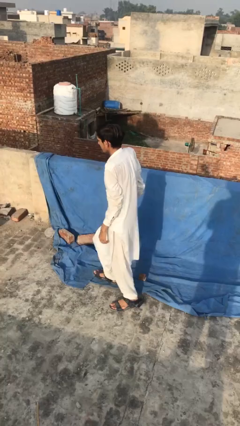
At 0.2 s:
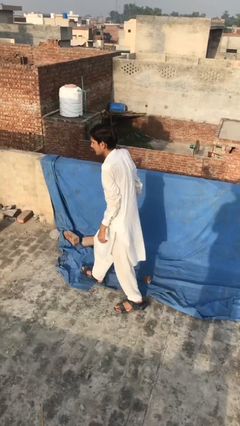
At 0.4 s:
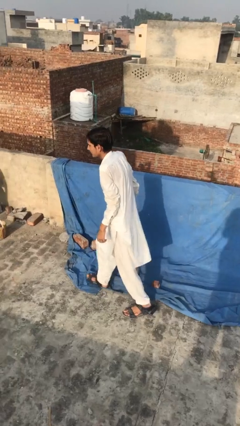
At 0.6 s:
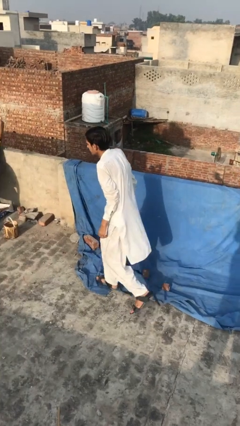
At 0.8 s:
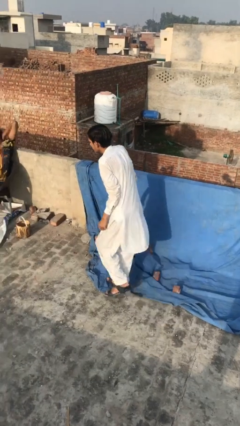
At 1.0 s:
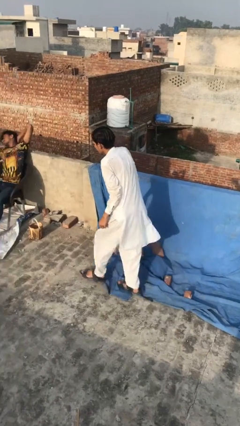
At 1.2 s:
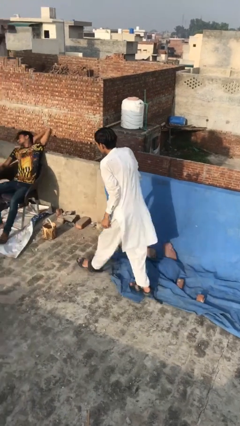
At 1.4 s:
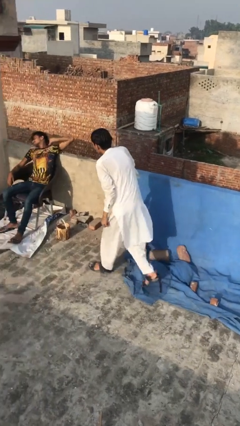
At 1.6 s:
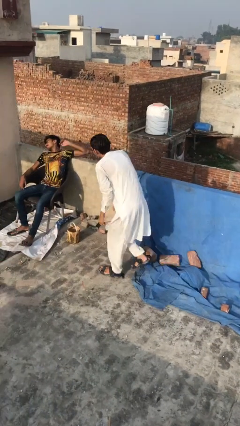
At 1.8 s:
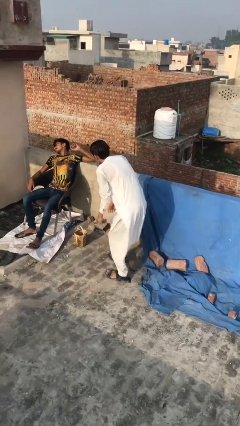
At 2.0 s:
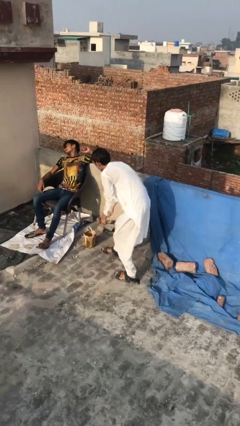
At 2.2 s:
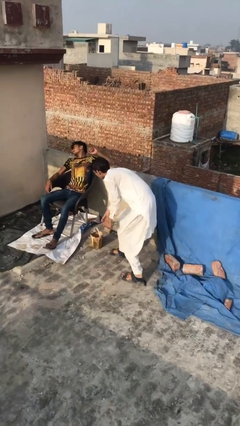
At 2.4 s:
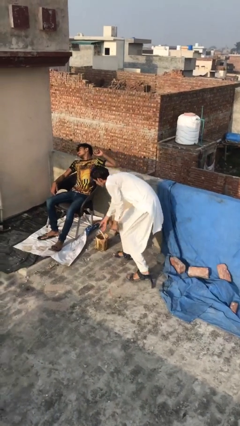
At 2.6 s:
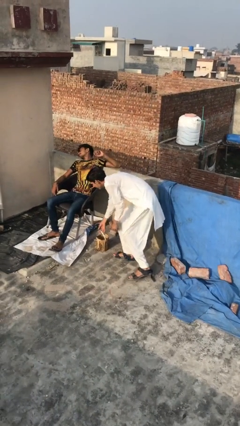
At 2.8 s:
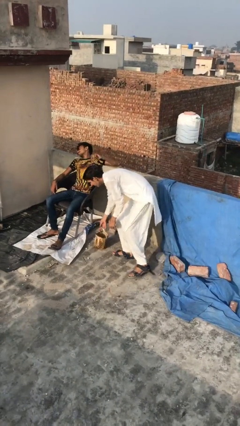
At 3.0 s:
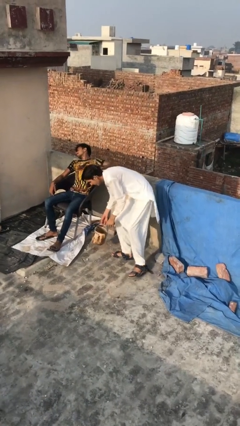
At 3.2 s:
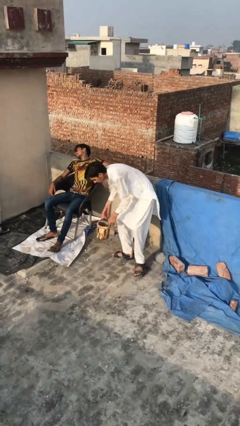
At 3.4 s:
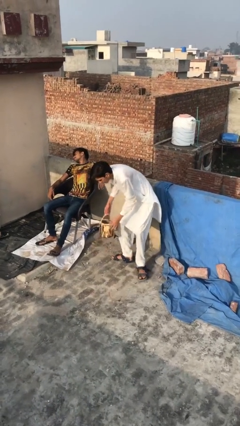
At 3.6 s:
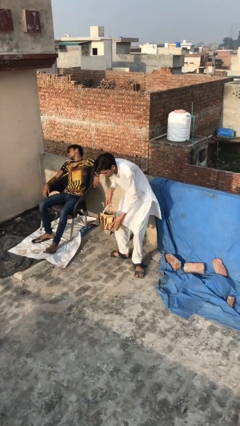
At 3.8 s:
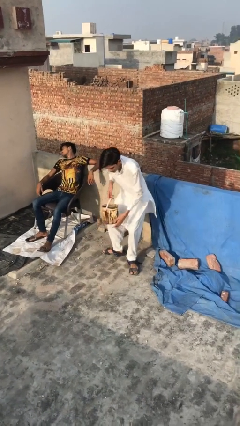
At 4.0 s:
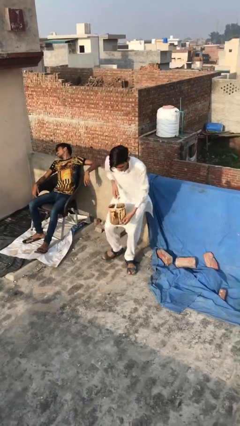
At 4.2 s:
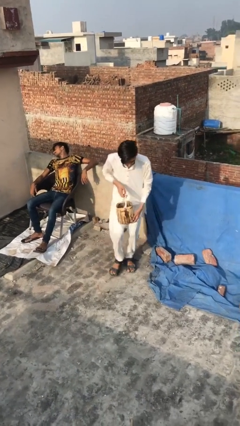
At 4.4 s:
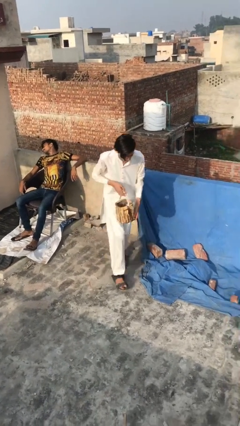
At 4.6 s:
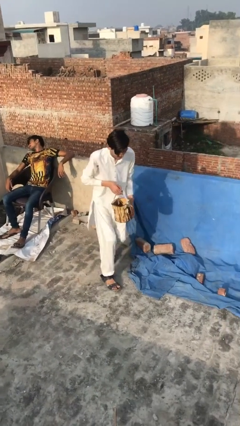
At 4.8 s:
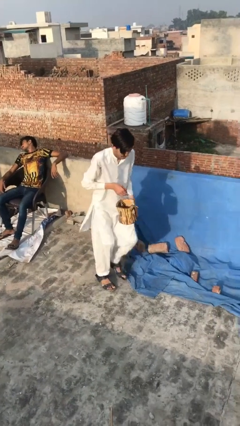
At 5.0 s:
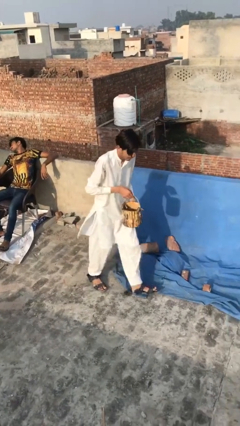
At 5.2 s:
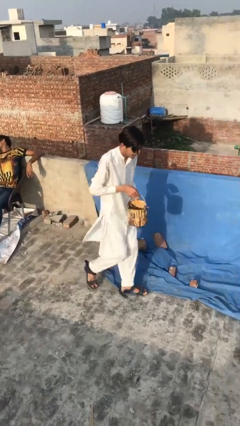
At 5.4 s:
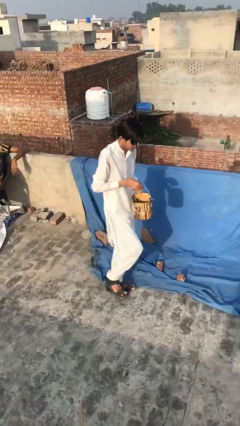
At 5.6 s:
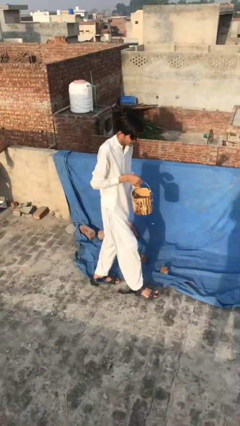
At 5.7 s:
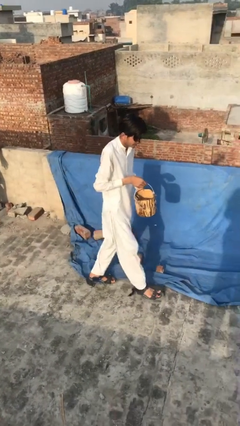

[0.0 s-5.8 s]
person steals object from person

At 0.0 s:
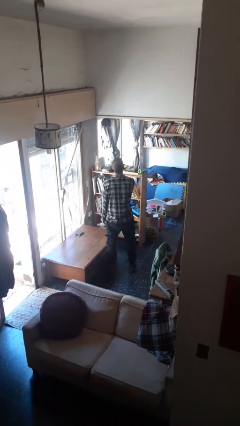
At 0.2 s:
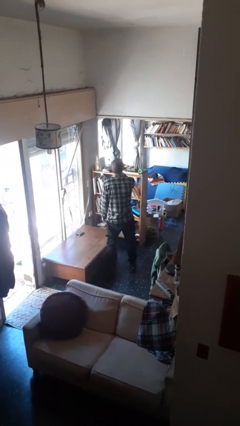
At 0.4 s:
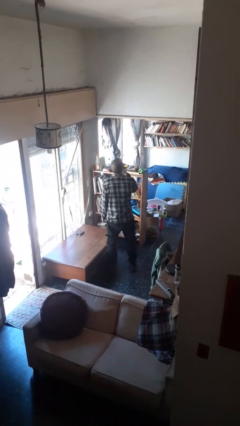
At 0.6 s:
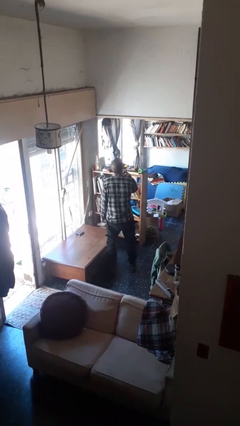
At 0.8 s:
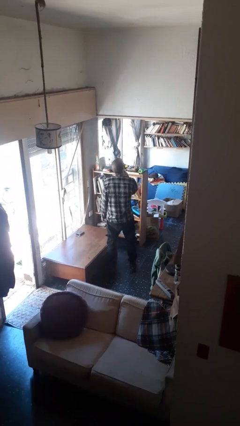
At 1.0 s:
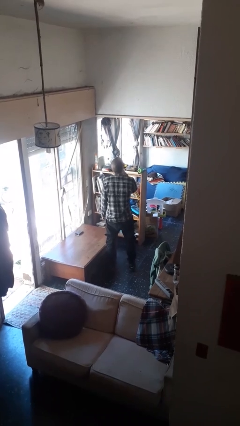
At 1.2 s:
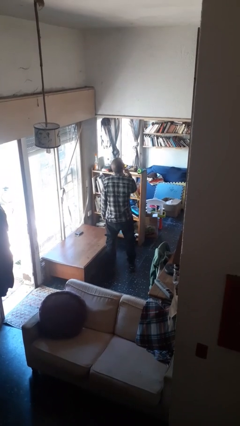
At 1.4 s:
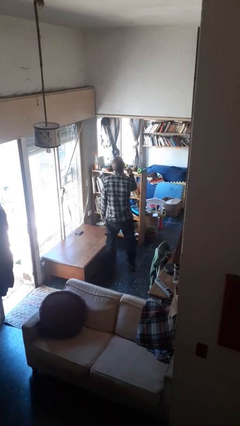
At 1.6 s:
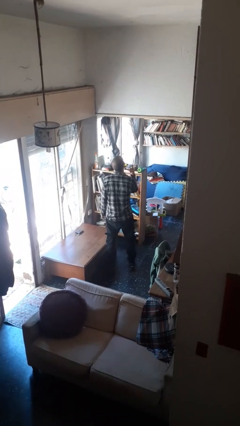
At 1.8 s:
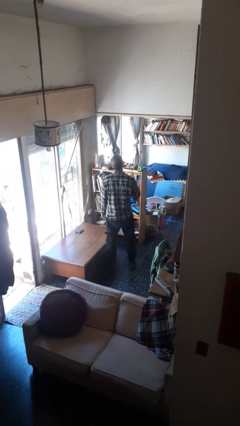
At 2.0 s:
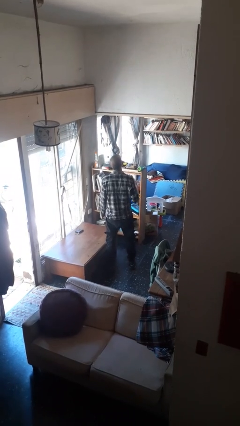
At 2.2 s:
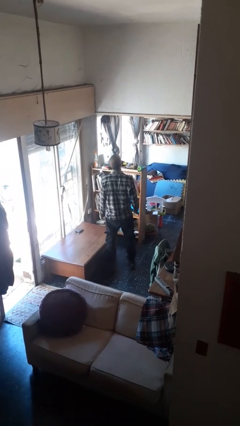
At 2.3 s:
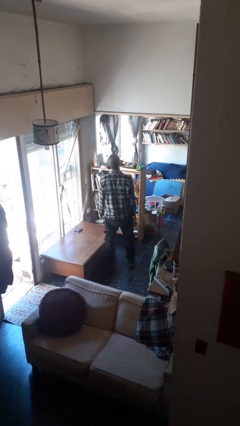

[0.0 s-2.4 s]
person gestures cut

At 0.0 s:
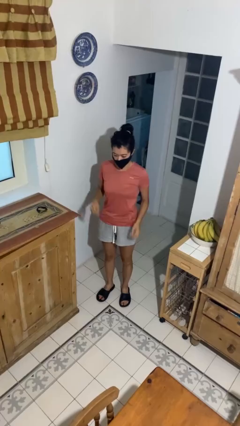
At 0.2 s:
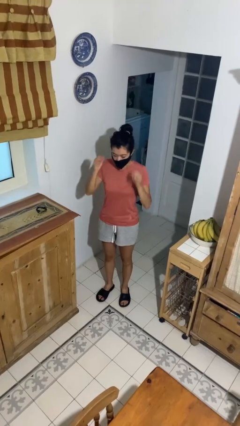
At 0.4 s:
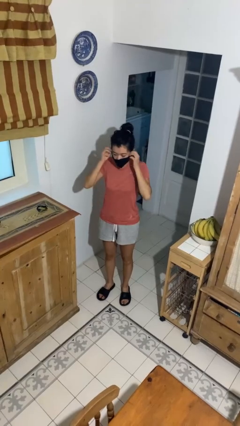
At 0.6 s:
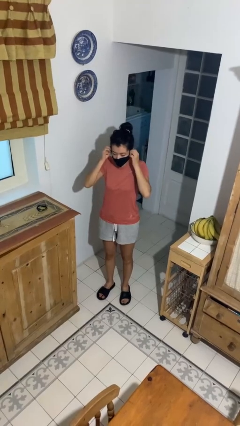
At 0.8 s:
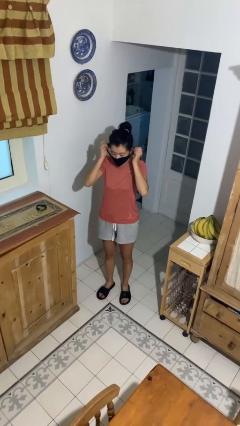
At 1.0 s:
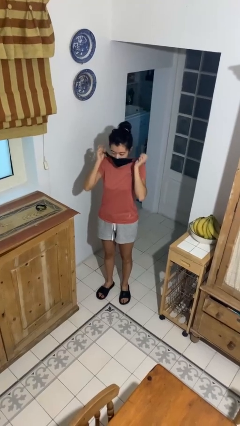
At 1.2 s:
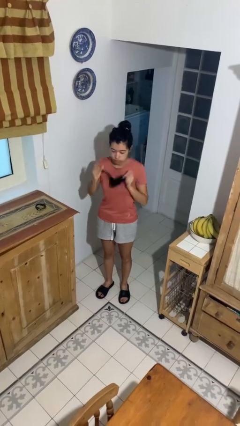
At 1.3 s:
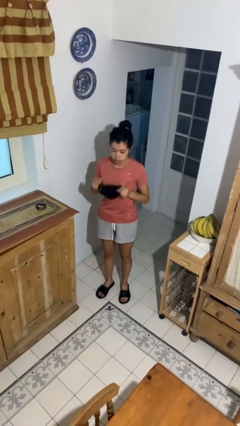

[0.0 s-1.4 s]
person takes off facemask

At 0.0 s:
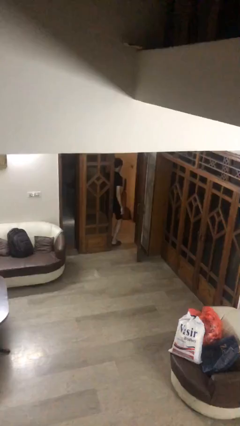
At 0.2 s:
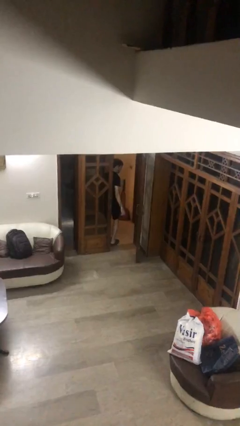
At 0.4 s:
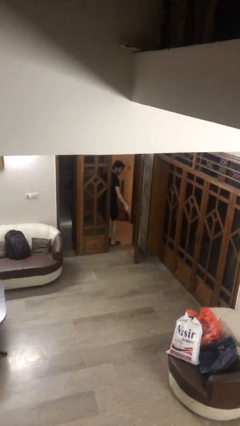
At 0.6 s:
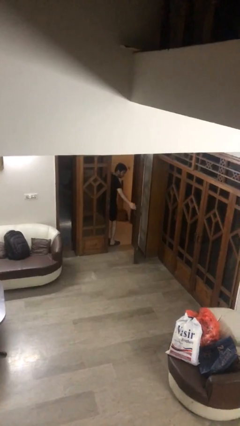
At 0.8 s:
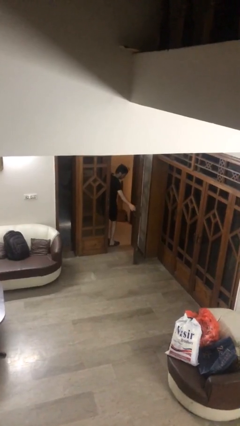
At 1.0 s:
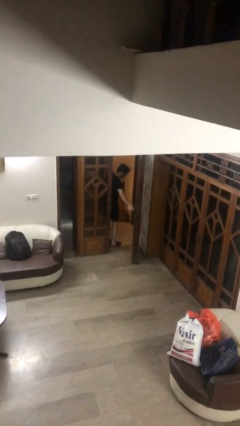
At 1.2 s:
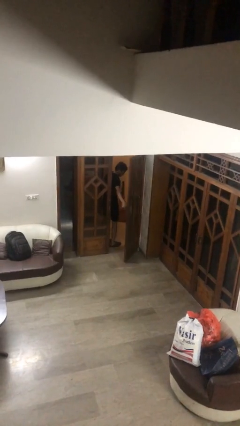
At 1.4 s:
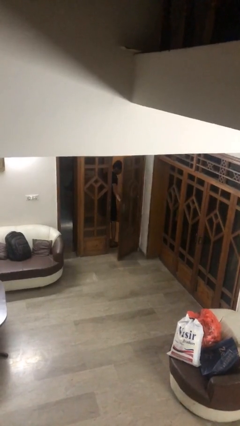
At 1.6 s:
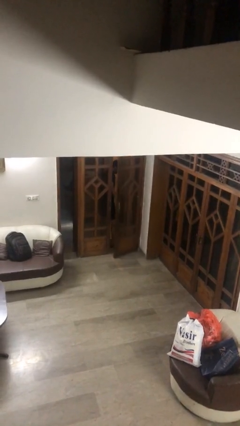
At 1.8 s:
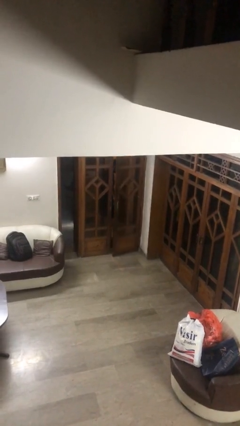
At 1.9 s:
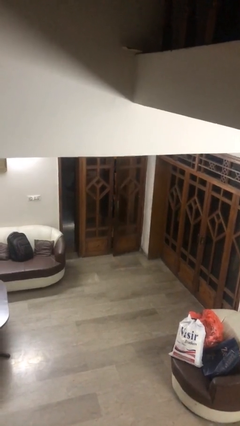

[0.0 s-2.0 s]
person closes facility door

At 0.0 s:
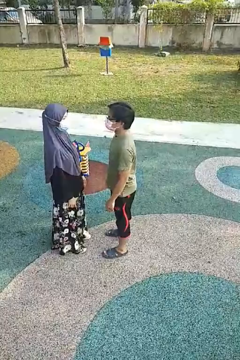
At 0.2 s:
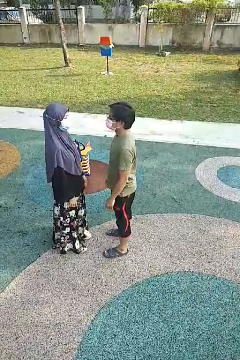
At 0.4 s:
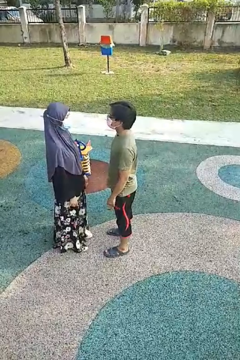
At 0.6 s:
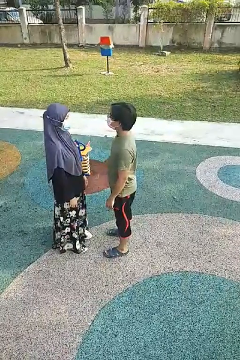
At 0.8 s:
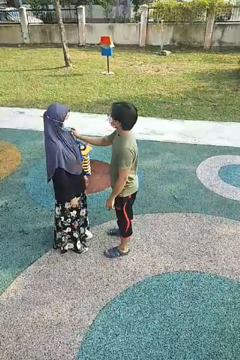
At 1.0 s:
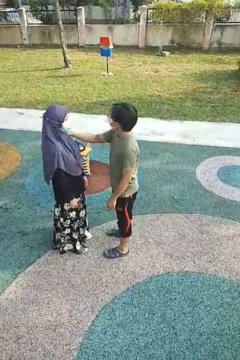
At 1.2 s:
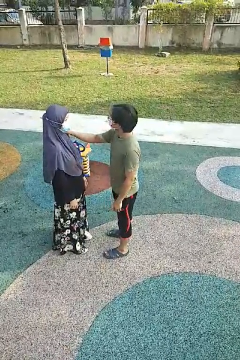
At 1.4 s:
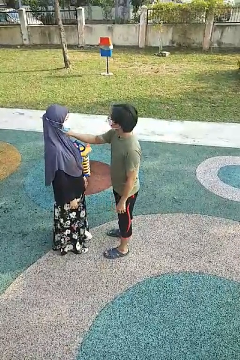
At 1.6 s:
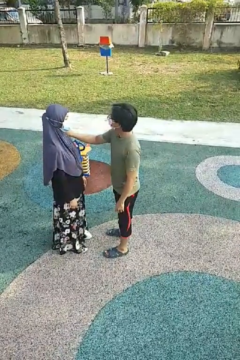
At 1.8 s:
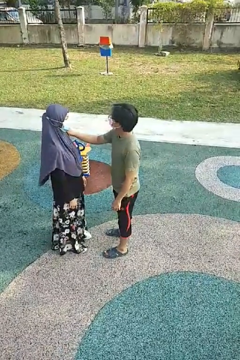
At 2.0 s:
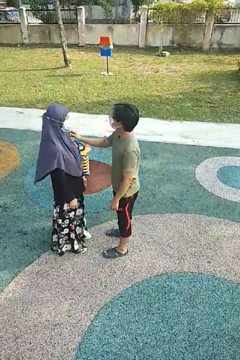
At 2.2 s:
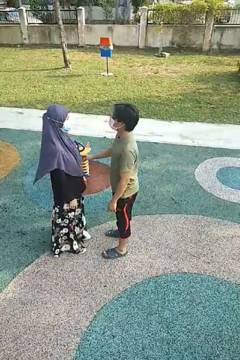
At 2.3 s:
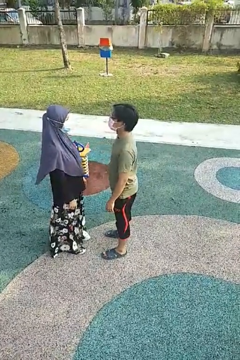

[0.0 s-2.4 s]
person pounds shoulders of person

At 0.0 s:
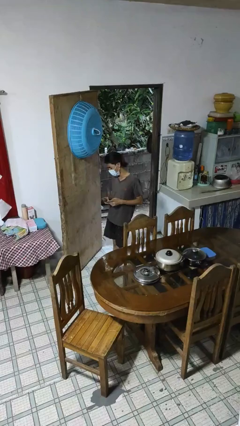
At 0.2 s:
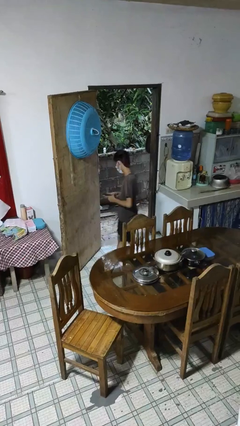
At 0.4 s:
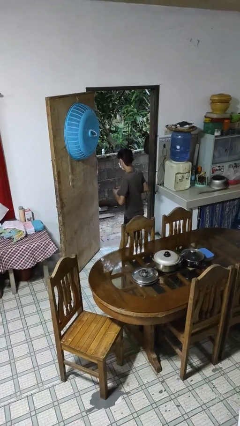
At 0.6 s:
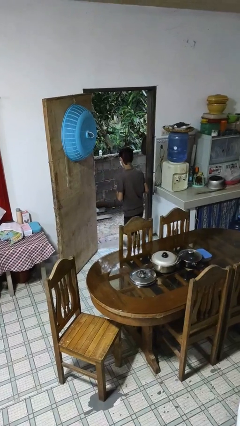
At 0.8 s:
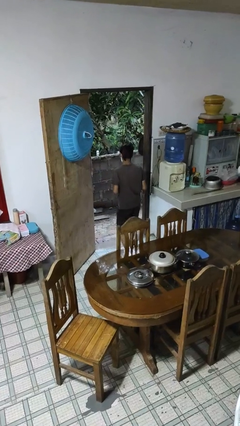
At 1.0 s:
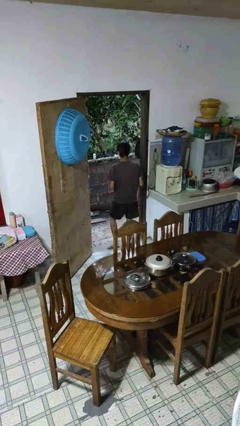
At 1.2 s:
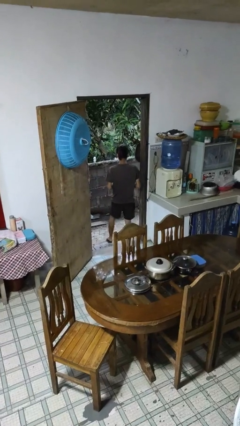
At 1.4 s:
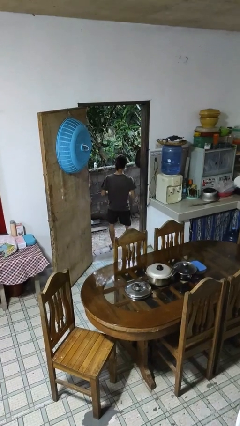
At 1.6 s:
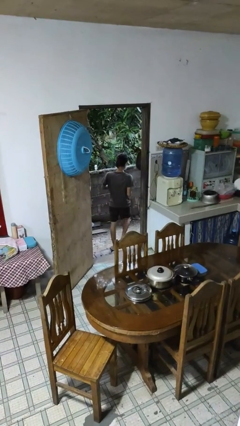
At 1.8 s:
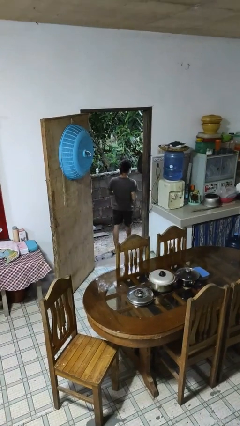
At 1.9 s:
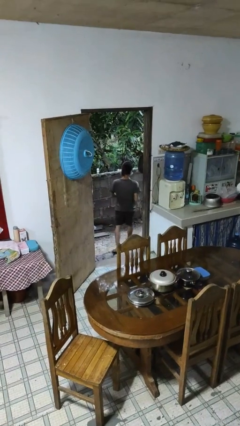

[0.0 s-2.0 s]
person exits scene through structure

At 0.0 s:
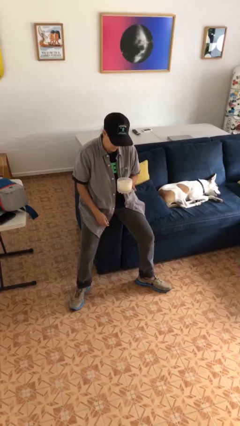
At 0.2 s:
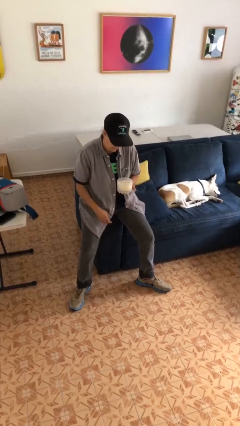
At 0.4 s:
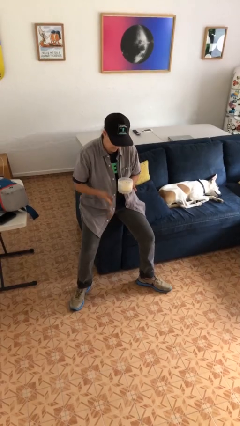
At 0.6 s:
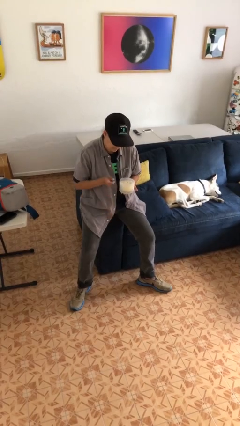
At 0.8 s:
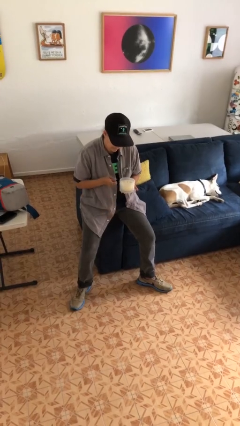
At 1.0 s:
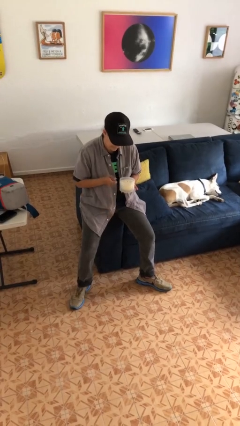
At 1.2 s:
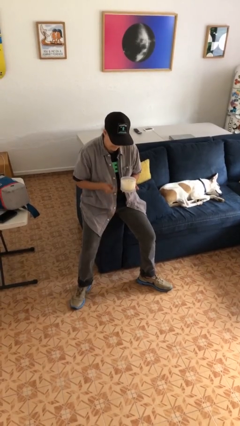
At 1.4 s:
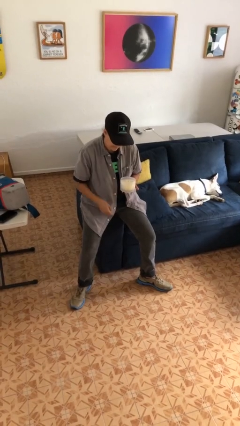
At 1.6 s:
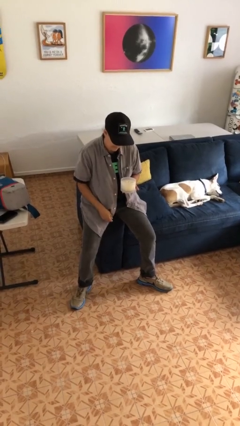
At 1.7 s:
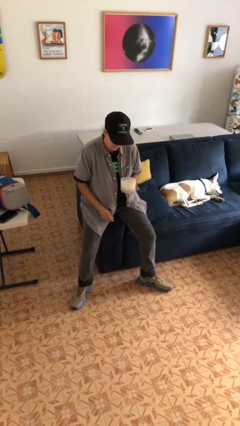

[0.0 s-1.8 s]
person taps object with finger
